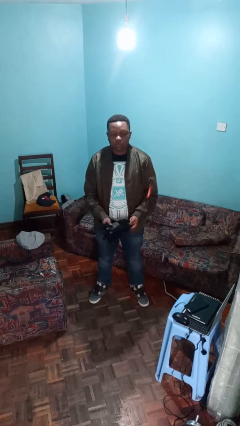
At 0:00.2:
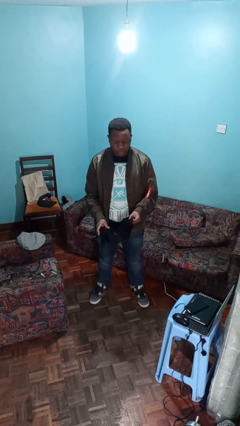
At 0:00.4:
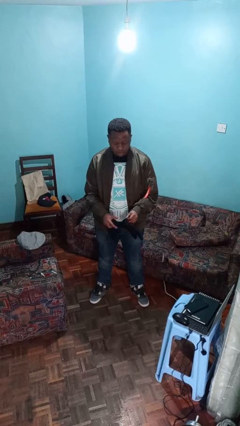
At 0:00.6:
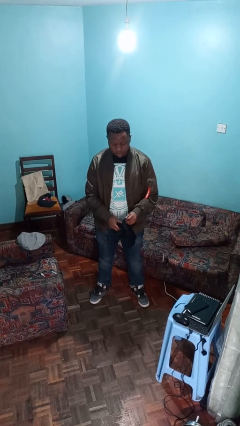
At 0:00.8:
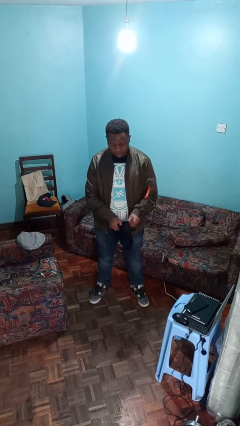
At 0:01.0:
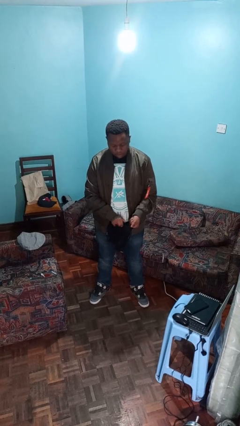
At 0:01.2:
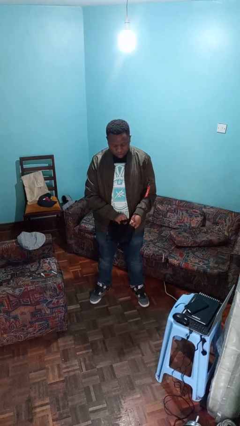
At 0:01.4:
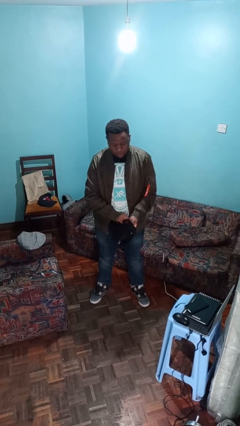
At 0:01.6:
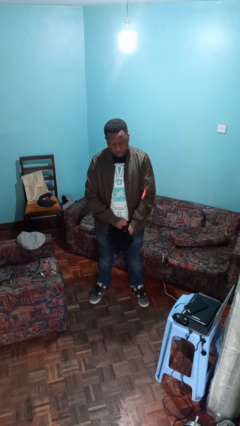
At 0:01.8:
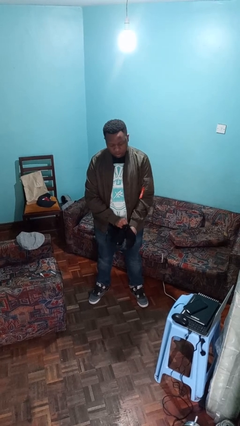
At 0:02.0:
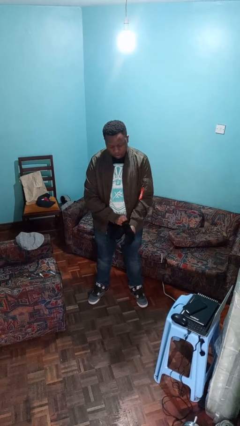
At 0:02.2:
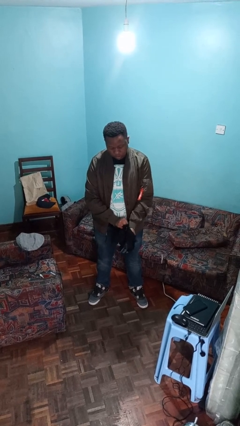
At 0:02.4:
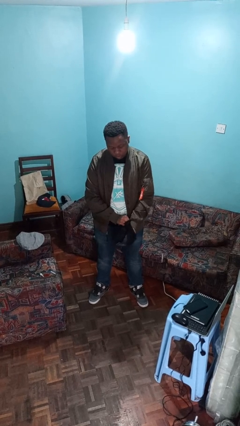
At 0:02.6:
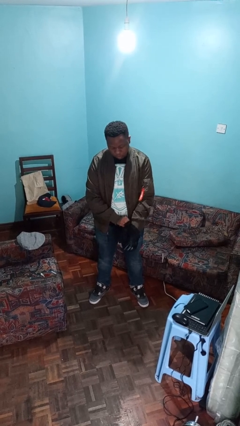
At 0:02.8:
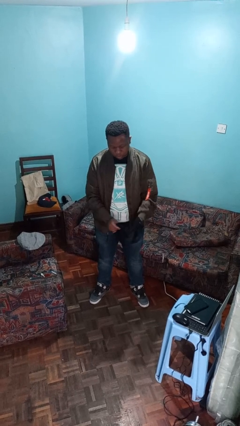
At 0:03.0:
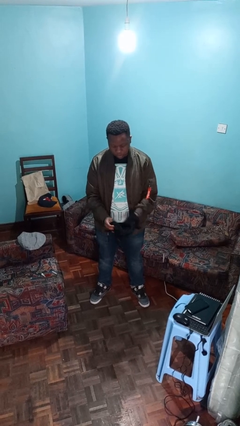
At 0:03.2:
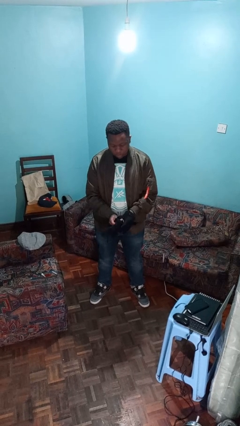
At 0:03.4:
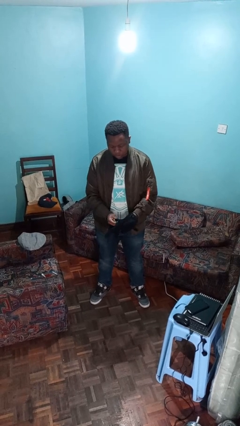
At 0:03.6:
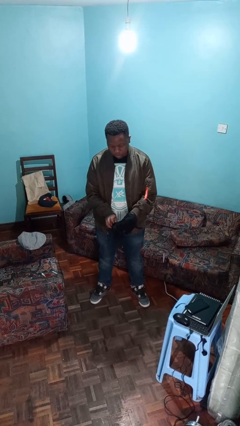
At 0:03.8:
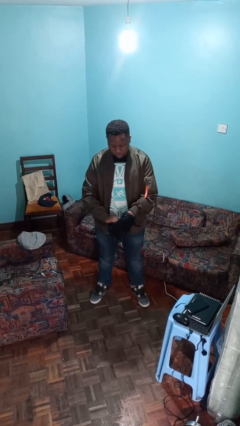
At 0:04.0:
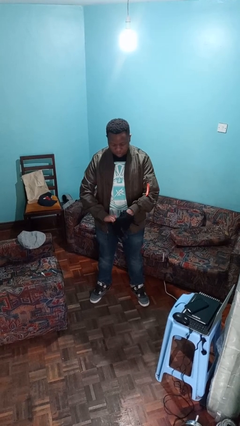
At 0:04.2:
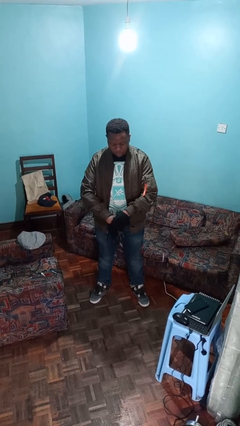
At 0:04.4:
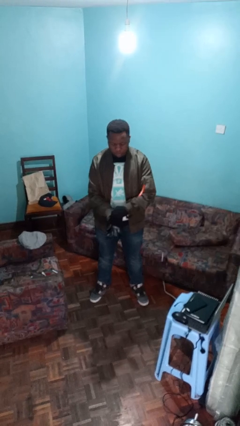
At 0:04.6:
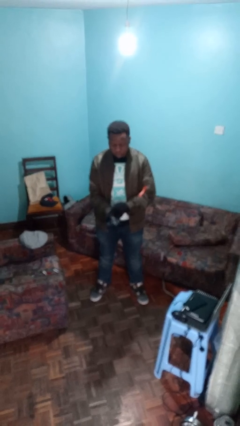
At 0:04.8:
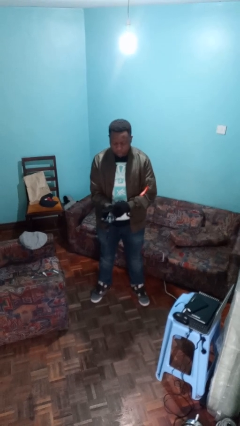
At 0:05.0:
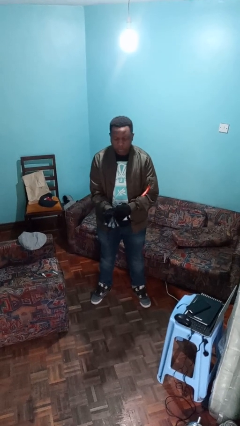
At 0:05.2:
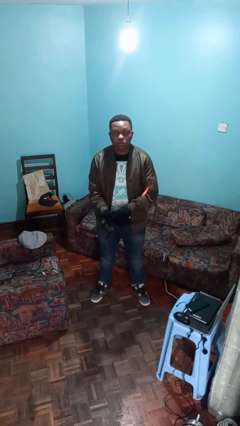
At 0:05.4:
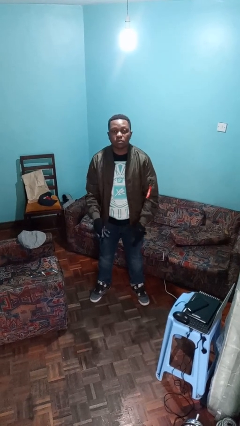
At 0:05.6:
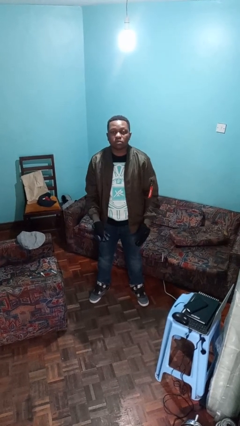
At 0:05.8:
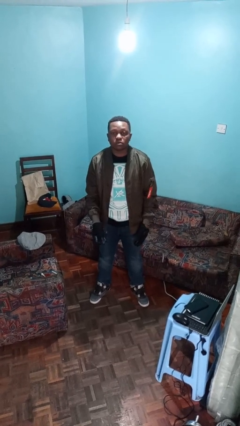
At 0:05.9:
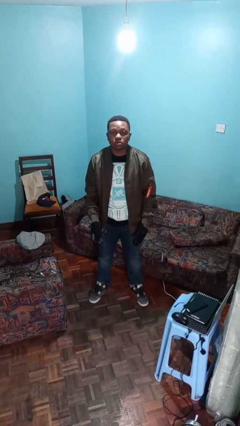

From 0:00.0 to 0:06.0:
person puts on gloves

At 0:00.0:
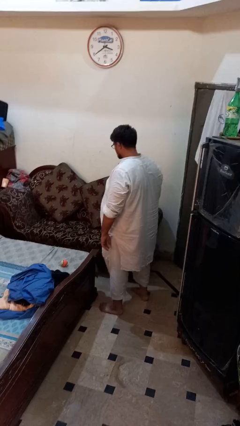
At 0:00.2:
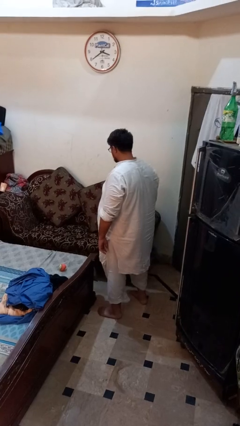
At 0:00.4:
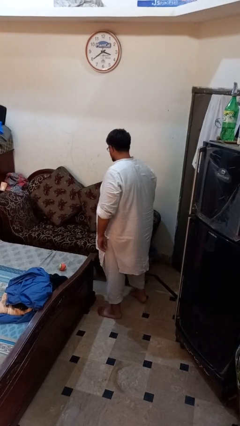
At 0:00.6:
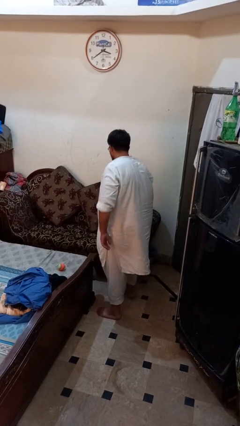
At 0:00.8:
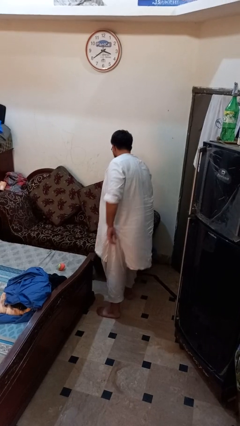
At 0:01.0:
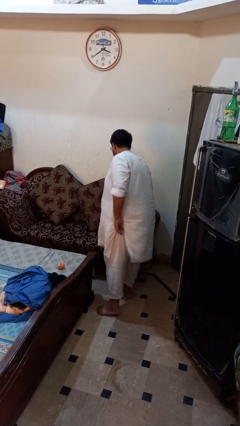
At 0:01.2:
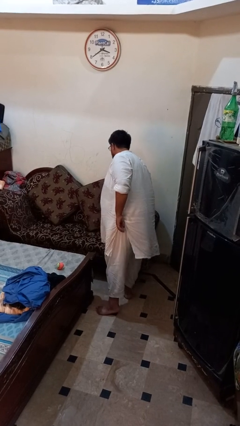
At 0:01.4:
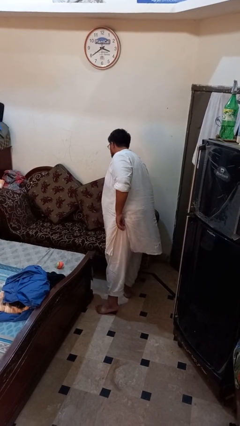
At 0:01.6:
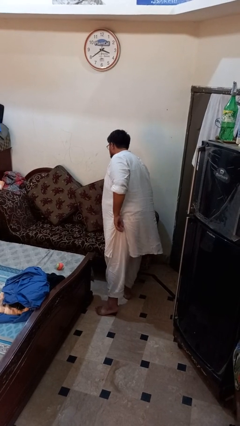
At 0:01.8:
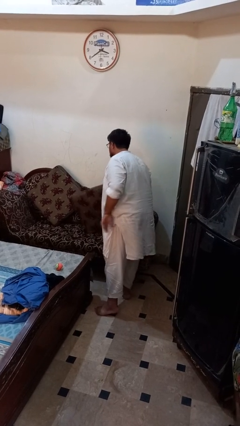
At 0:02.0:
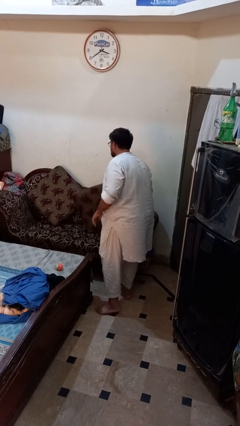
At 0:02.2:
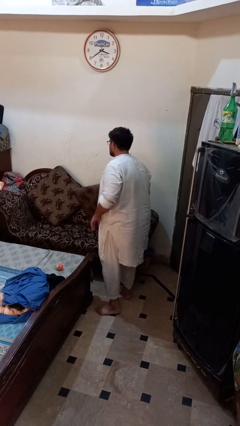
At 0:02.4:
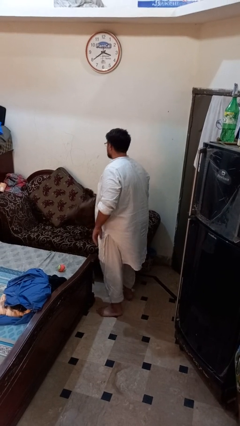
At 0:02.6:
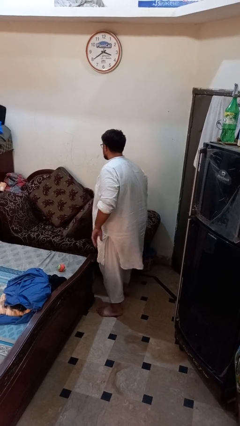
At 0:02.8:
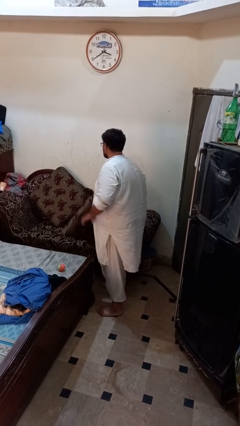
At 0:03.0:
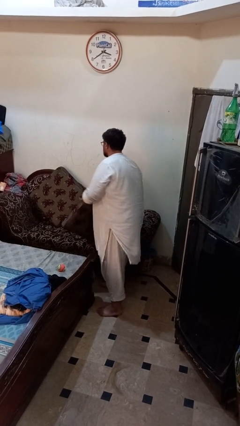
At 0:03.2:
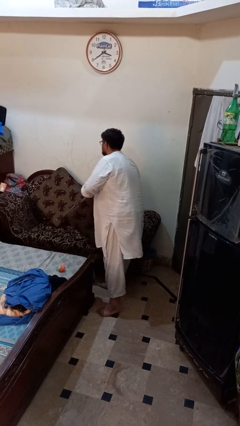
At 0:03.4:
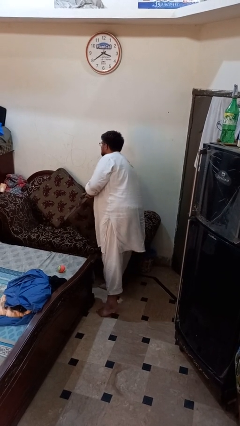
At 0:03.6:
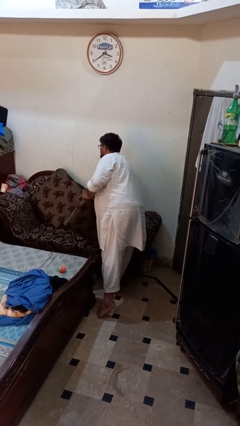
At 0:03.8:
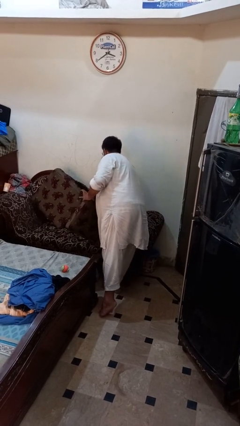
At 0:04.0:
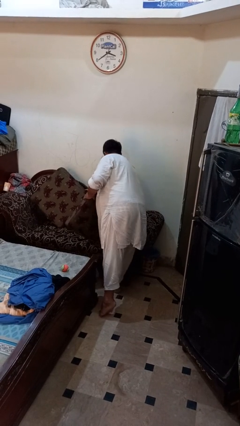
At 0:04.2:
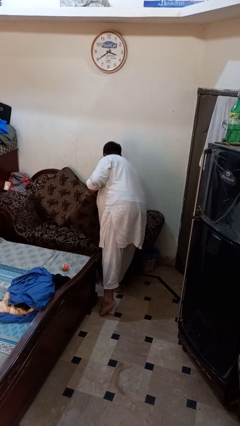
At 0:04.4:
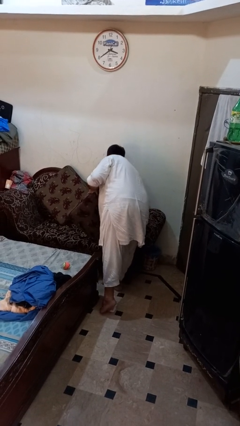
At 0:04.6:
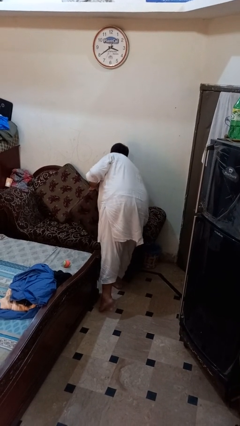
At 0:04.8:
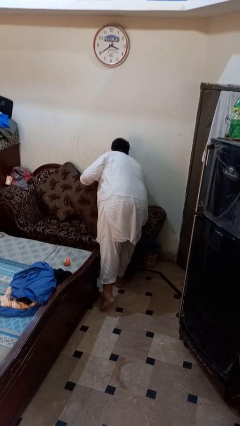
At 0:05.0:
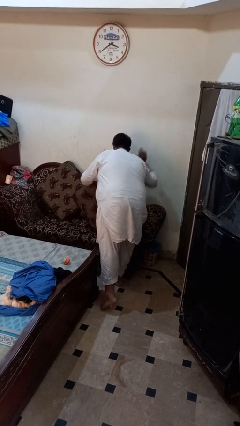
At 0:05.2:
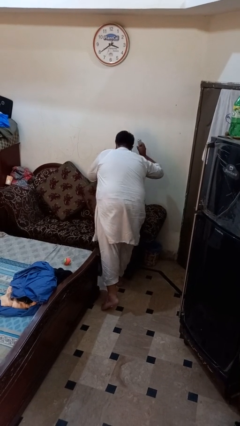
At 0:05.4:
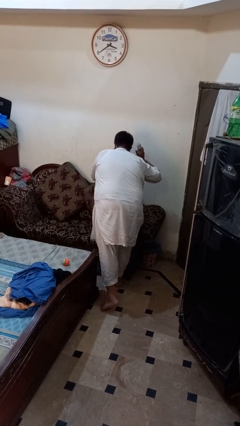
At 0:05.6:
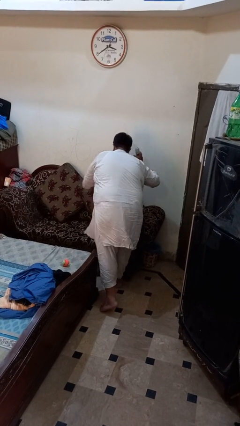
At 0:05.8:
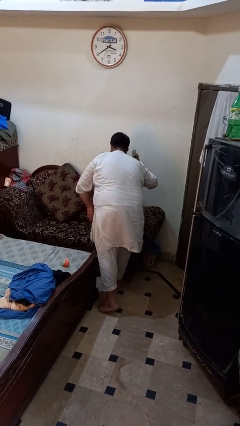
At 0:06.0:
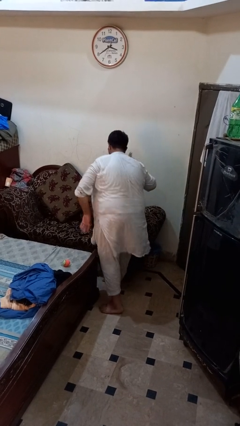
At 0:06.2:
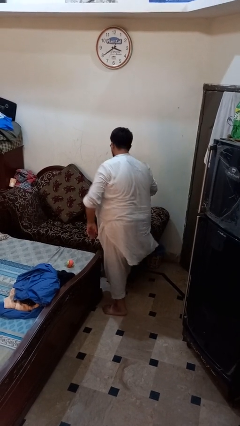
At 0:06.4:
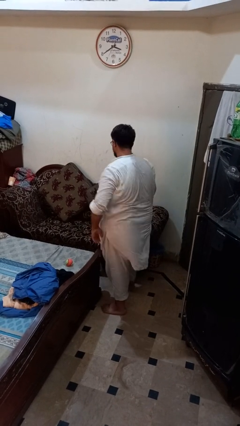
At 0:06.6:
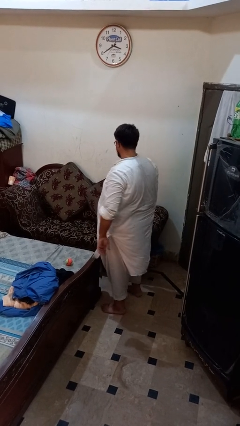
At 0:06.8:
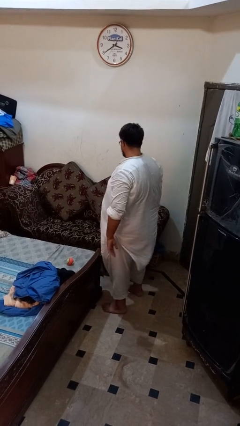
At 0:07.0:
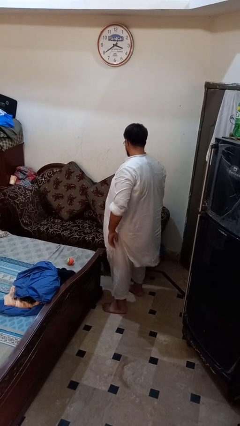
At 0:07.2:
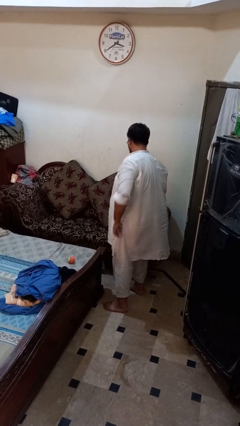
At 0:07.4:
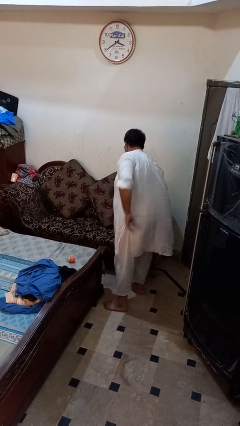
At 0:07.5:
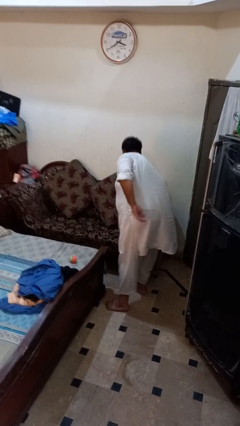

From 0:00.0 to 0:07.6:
person searches in couch

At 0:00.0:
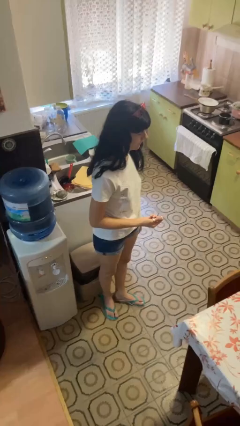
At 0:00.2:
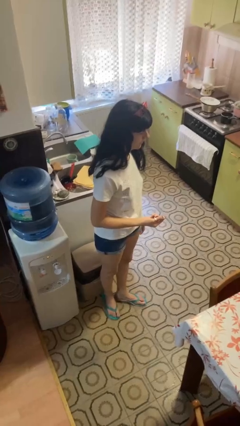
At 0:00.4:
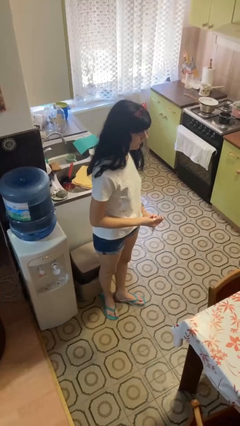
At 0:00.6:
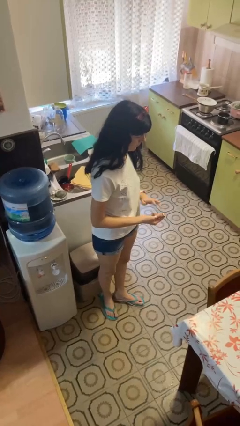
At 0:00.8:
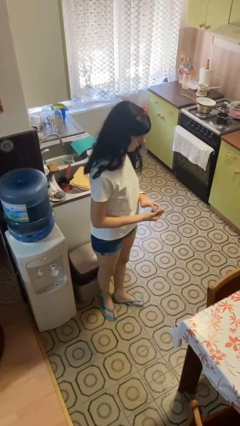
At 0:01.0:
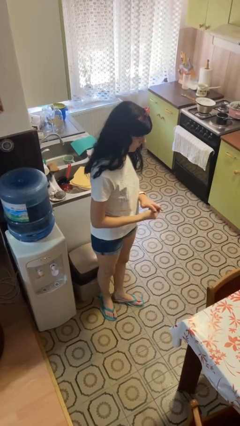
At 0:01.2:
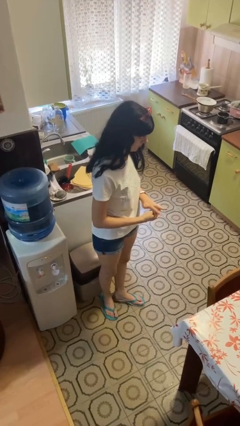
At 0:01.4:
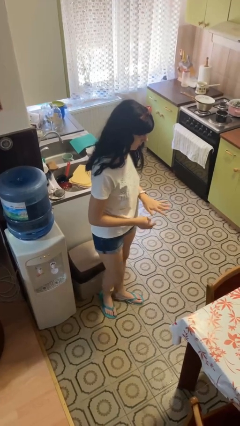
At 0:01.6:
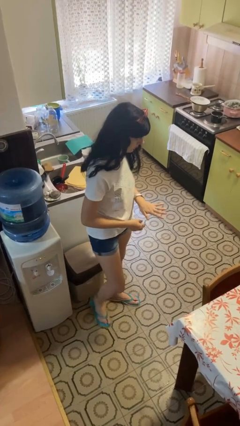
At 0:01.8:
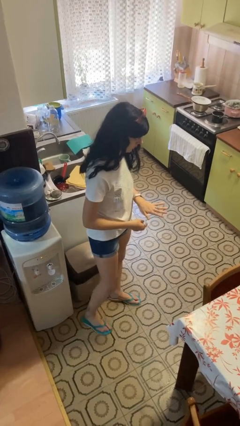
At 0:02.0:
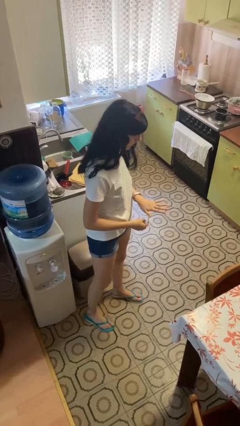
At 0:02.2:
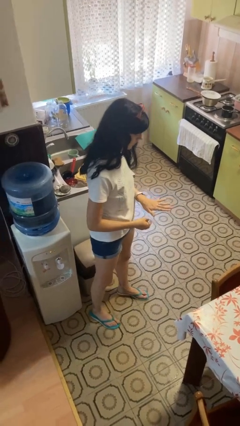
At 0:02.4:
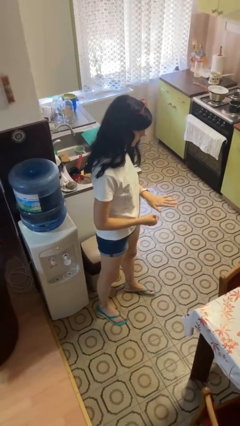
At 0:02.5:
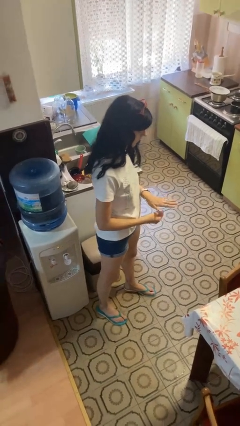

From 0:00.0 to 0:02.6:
person puts on ring

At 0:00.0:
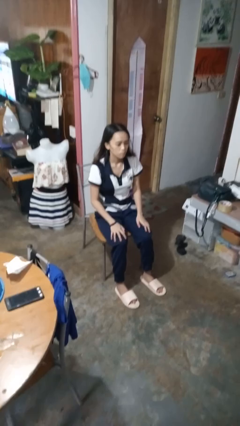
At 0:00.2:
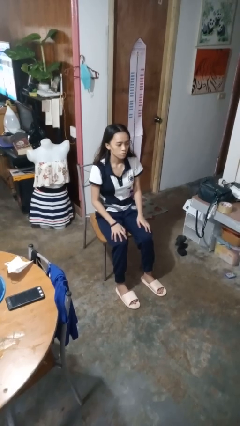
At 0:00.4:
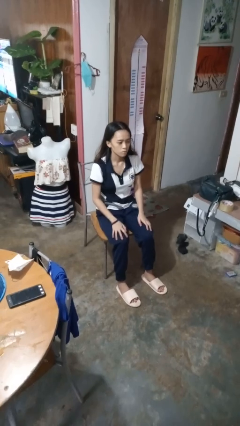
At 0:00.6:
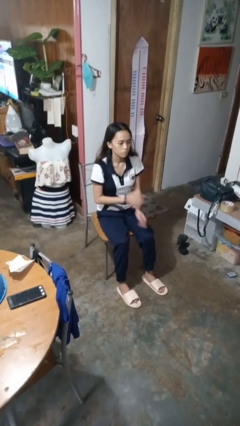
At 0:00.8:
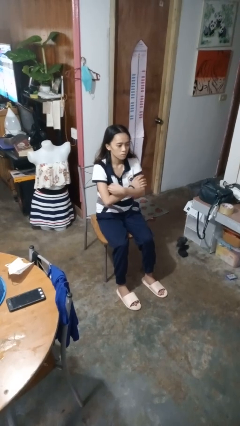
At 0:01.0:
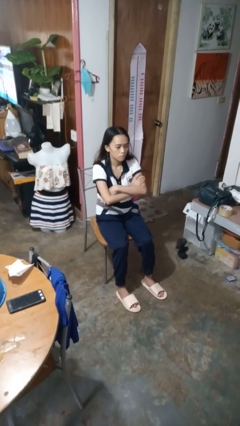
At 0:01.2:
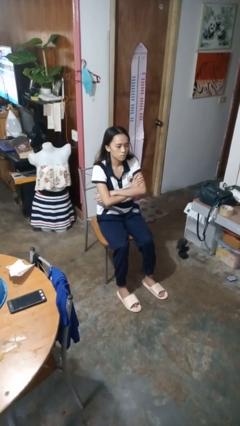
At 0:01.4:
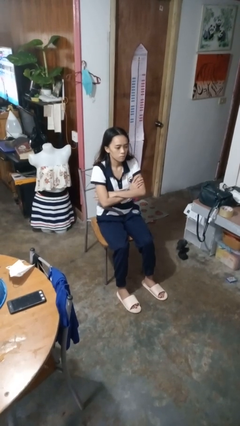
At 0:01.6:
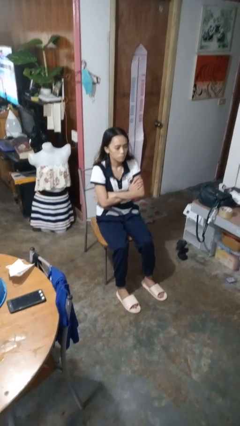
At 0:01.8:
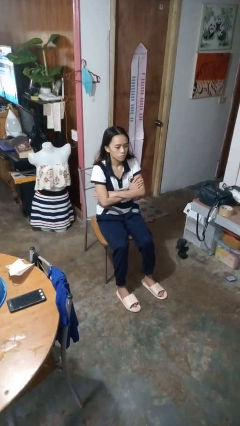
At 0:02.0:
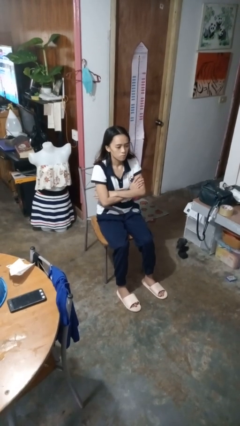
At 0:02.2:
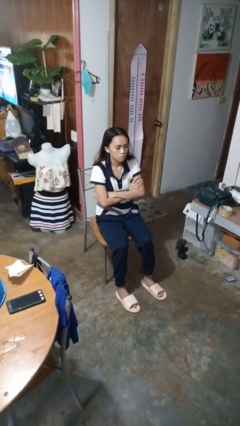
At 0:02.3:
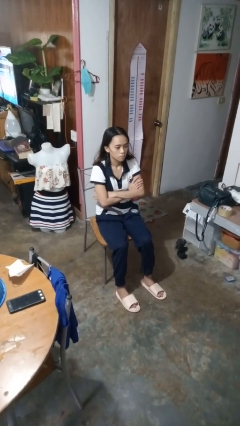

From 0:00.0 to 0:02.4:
person crosses arms
